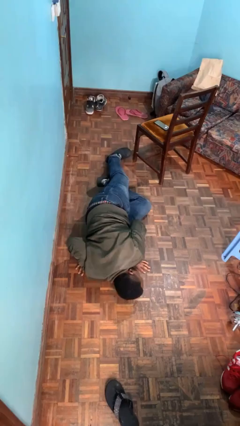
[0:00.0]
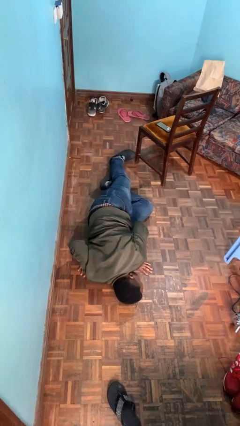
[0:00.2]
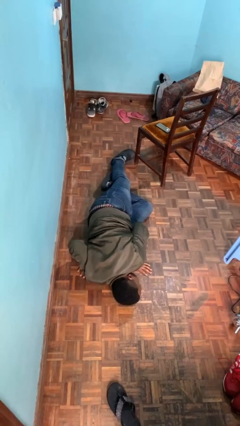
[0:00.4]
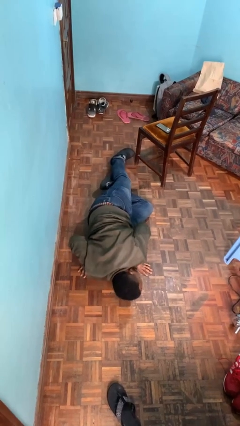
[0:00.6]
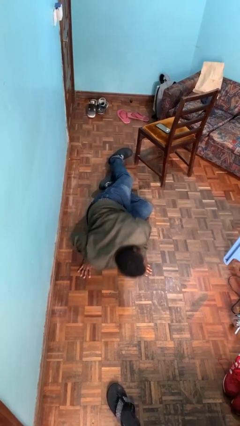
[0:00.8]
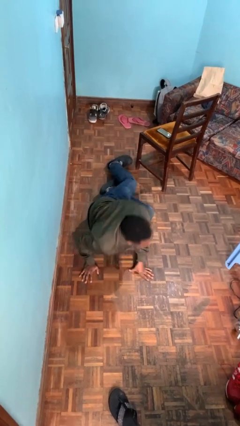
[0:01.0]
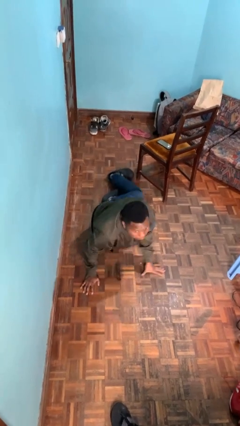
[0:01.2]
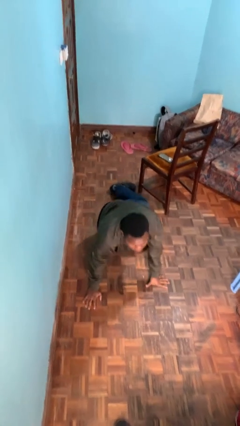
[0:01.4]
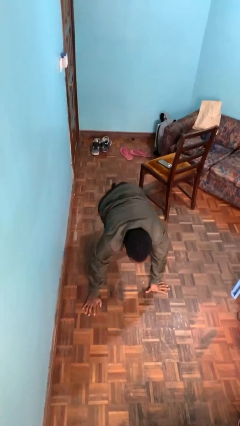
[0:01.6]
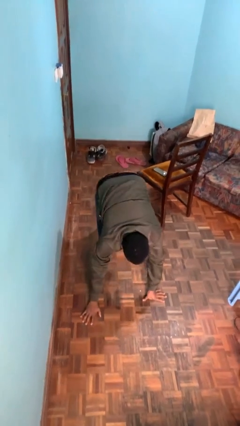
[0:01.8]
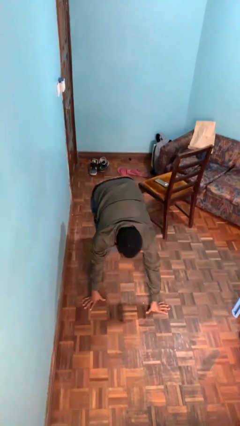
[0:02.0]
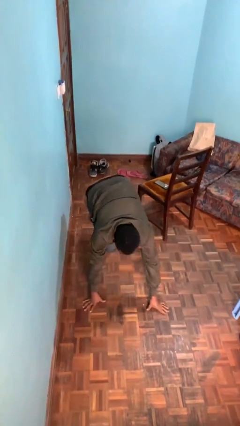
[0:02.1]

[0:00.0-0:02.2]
person stands up from floor

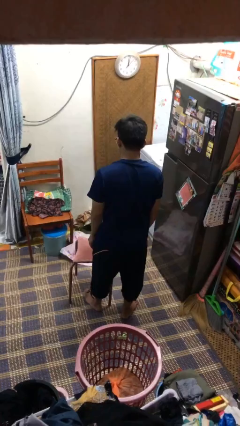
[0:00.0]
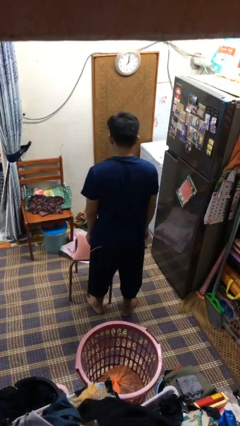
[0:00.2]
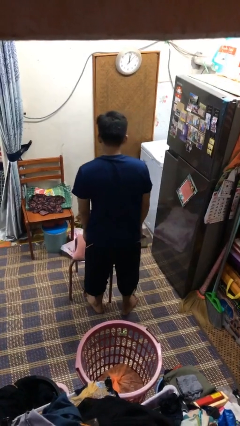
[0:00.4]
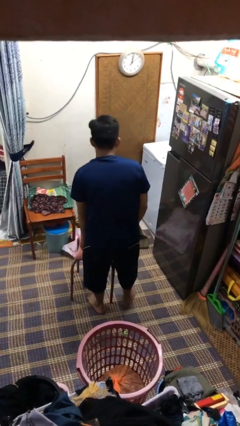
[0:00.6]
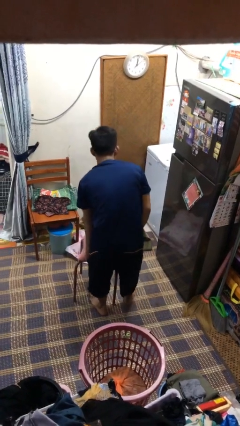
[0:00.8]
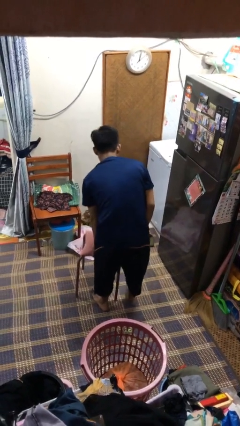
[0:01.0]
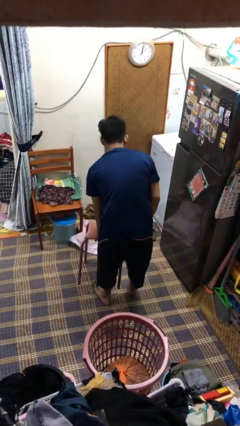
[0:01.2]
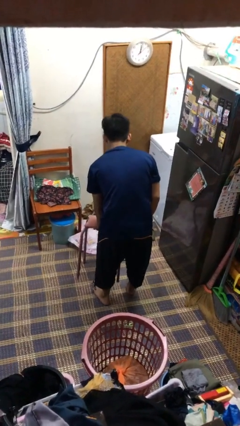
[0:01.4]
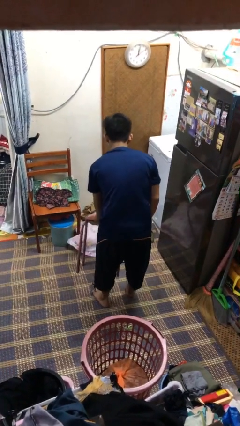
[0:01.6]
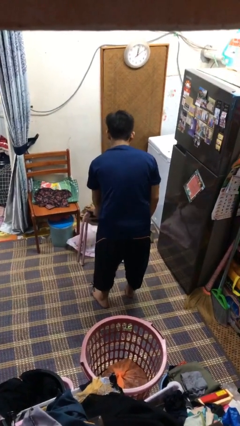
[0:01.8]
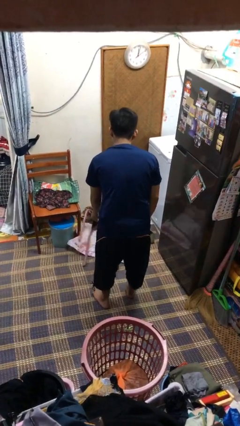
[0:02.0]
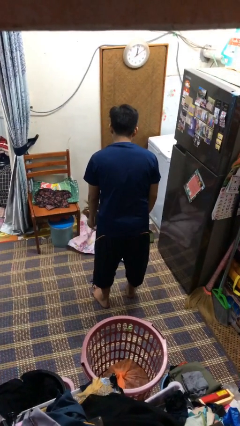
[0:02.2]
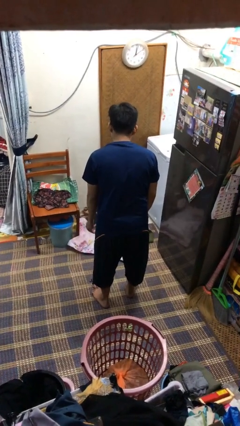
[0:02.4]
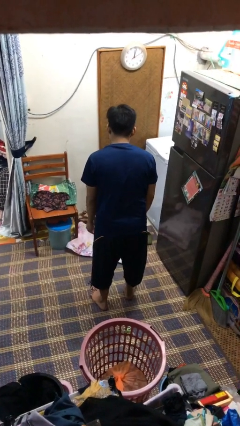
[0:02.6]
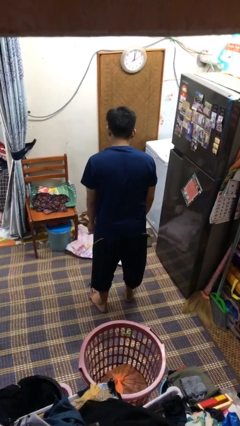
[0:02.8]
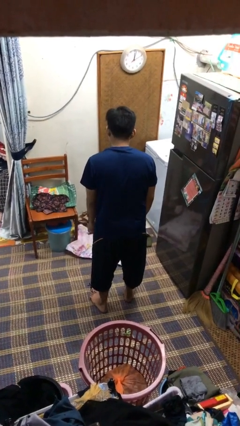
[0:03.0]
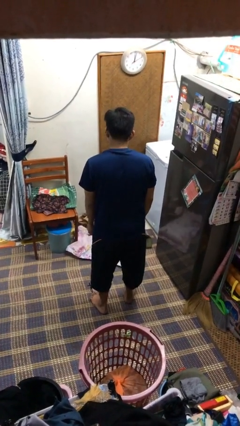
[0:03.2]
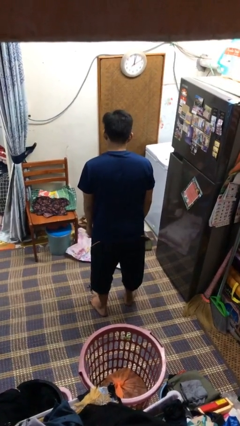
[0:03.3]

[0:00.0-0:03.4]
person knocks over furniture

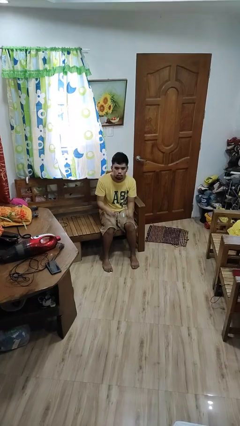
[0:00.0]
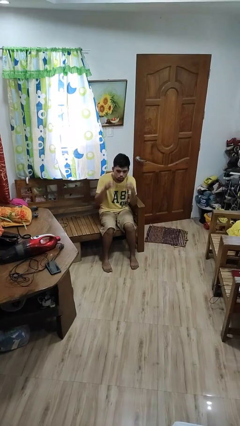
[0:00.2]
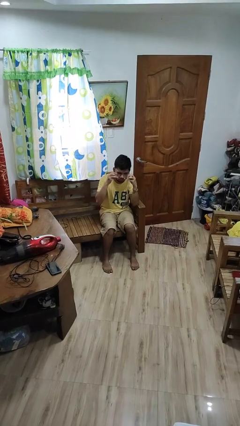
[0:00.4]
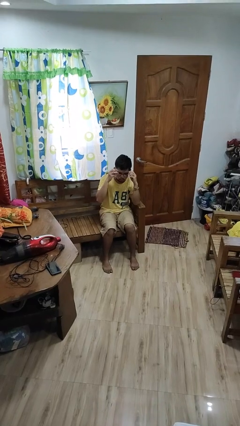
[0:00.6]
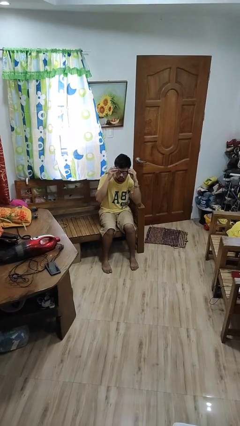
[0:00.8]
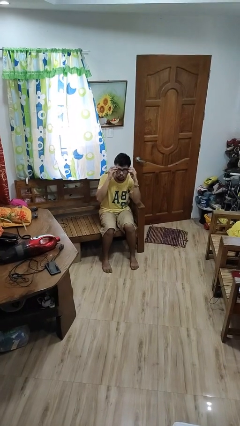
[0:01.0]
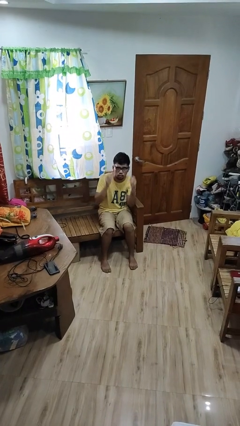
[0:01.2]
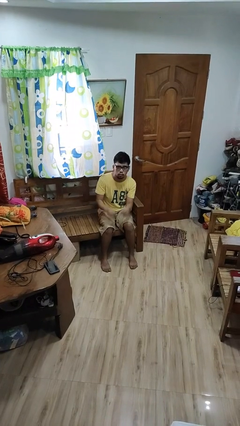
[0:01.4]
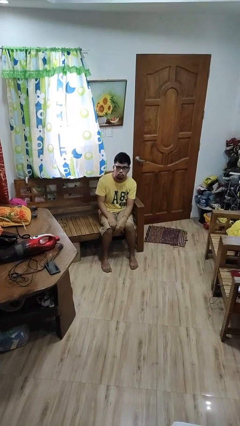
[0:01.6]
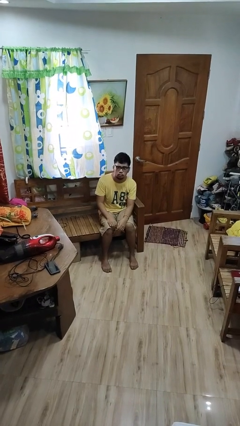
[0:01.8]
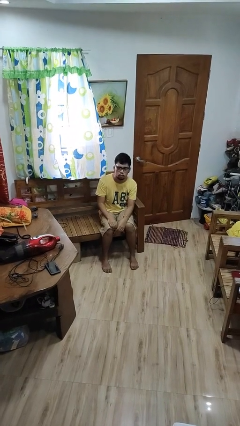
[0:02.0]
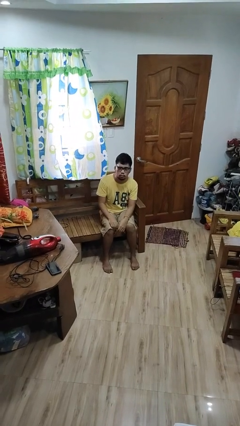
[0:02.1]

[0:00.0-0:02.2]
person puts on glasses

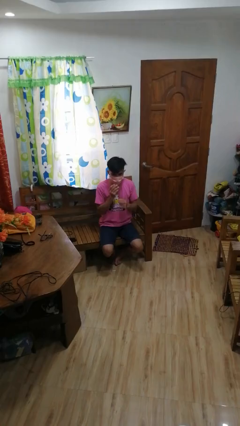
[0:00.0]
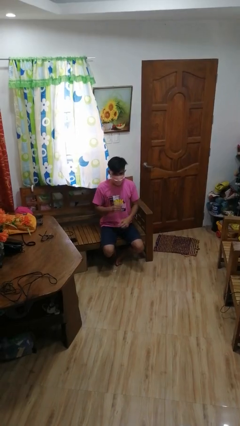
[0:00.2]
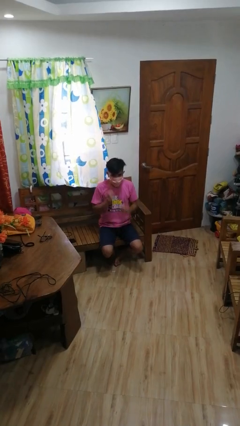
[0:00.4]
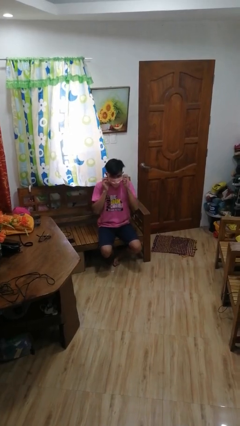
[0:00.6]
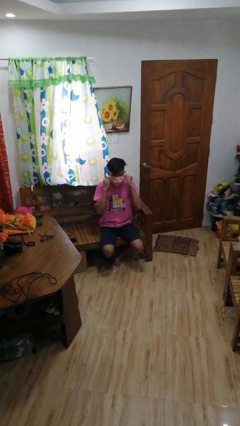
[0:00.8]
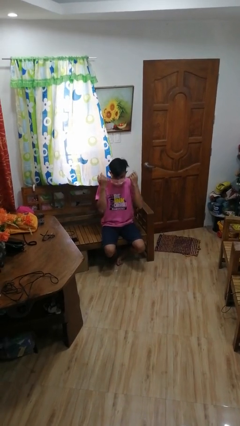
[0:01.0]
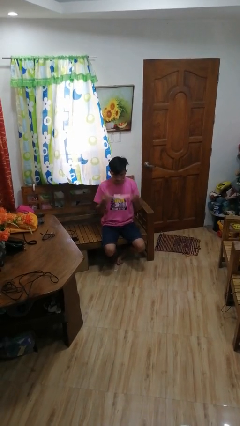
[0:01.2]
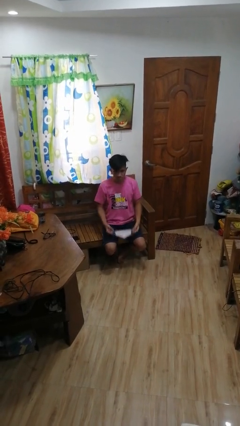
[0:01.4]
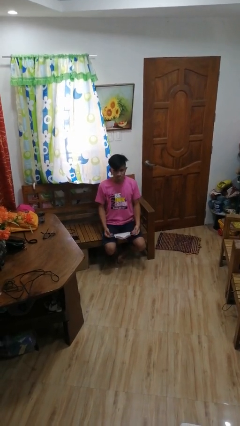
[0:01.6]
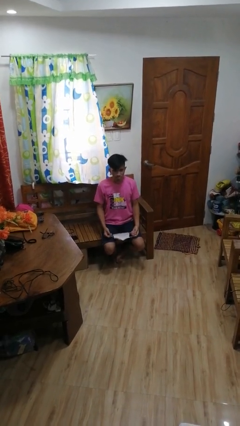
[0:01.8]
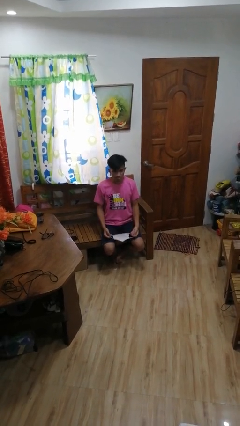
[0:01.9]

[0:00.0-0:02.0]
person takes off facemask

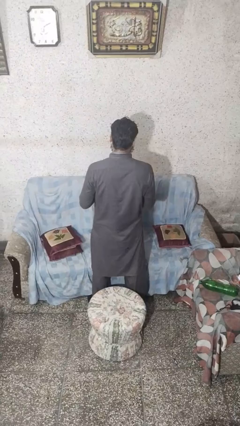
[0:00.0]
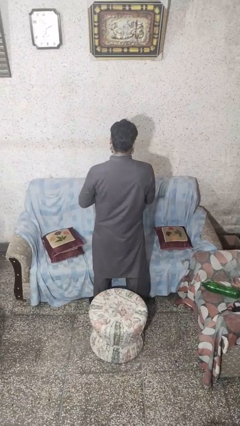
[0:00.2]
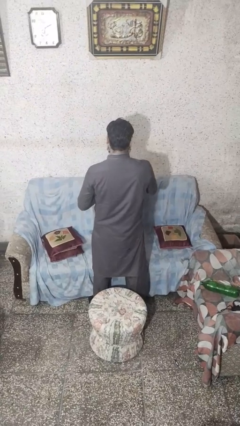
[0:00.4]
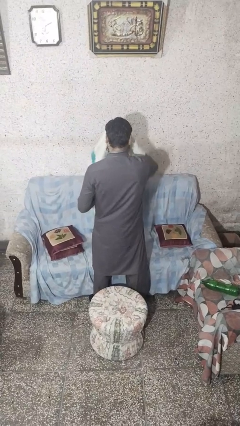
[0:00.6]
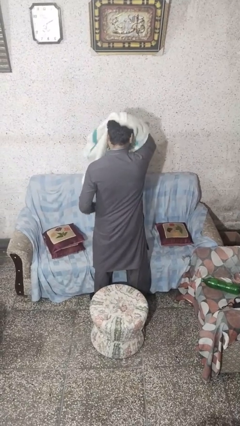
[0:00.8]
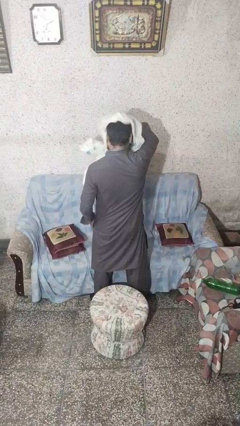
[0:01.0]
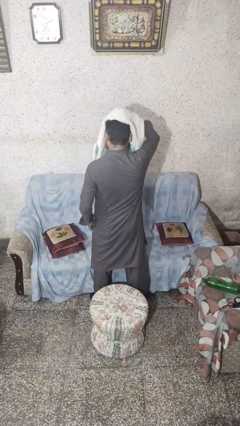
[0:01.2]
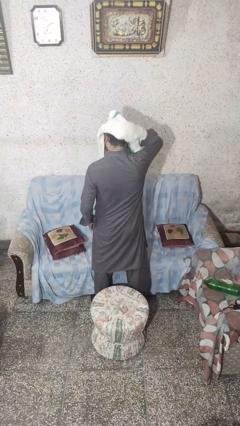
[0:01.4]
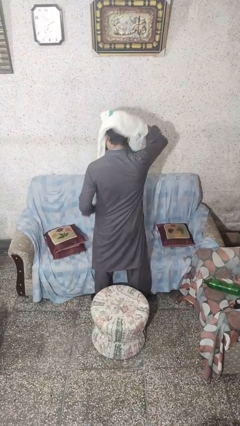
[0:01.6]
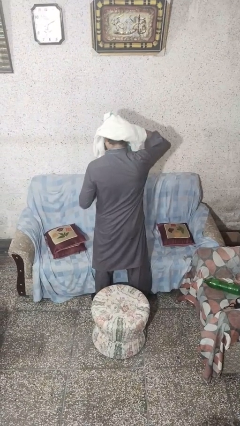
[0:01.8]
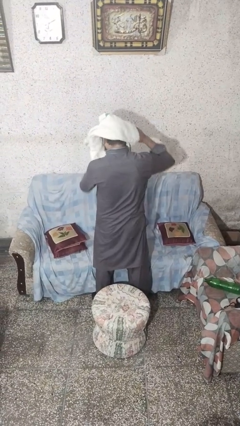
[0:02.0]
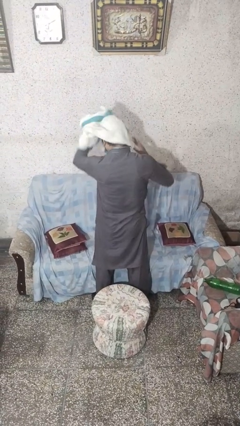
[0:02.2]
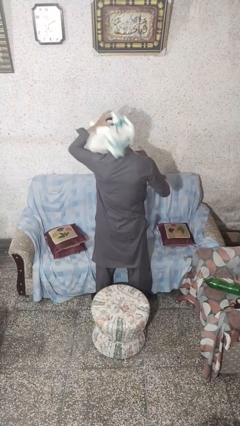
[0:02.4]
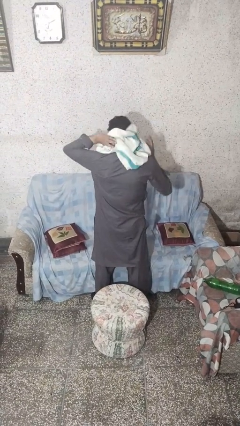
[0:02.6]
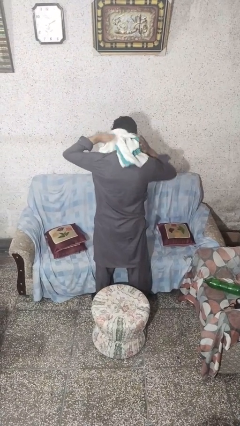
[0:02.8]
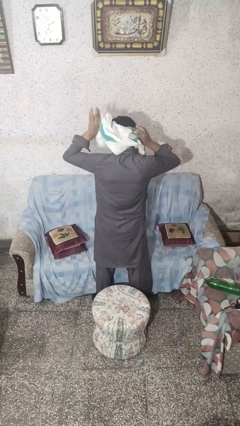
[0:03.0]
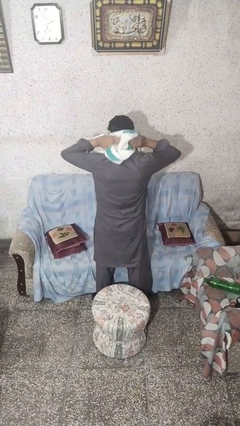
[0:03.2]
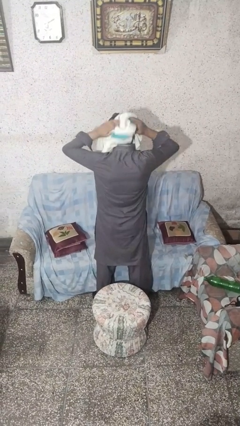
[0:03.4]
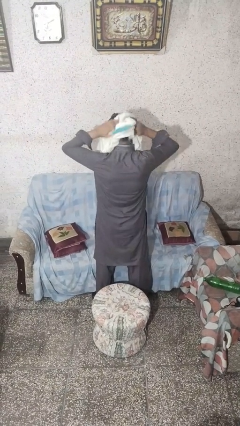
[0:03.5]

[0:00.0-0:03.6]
person dries hair with towel

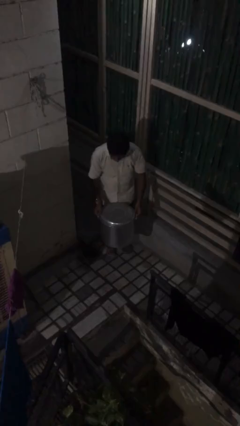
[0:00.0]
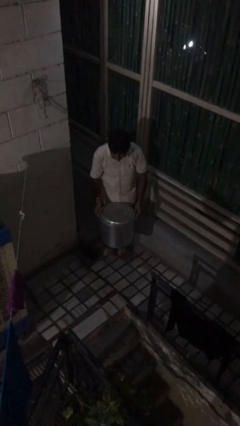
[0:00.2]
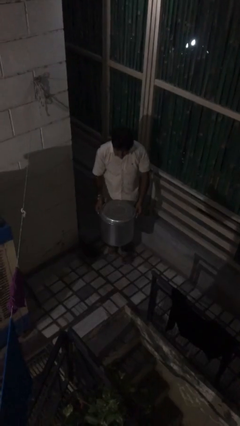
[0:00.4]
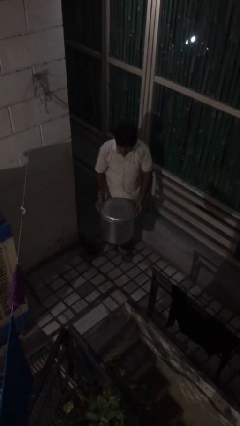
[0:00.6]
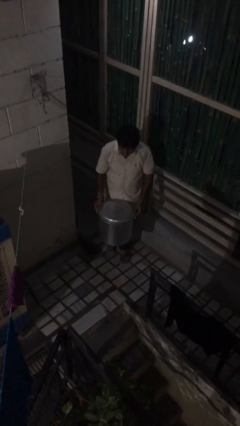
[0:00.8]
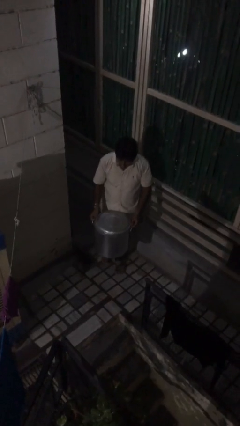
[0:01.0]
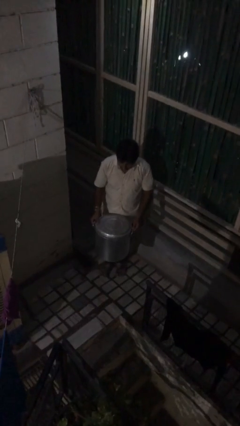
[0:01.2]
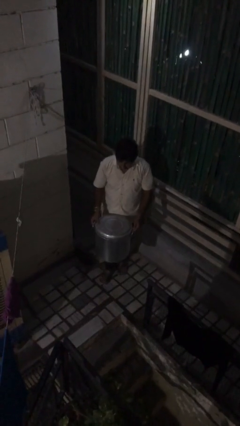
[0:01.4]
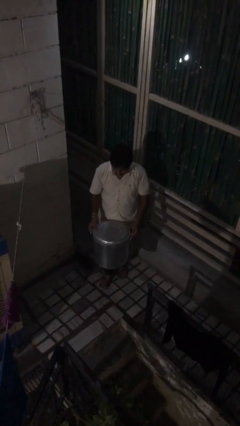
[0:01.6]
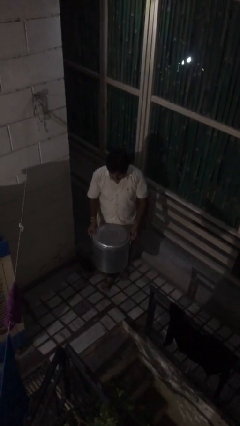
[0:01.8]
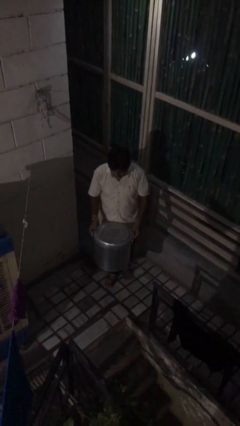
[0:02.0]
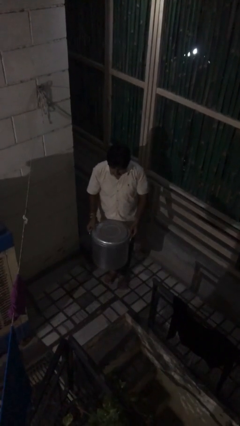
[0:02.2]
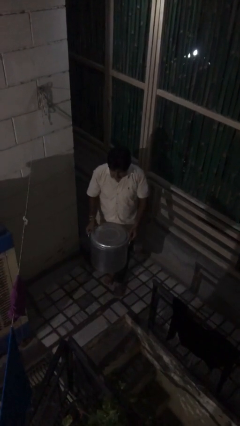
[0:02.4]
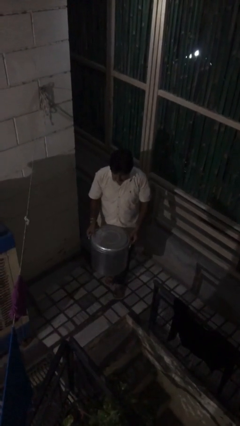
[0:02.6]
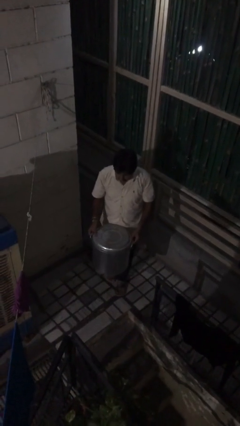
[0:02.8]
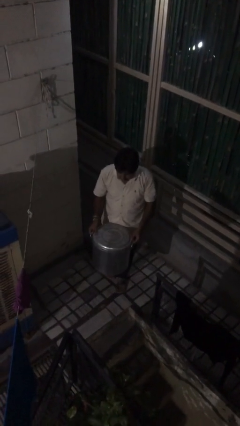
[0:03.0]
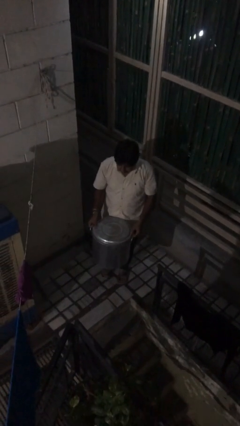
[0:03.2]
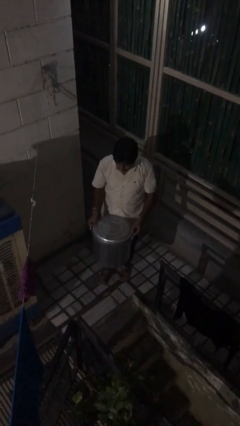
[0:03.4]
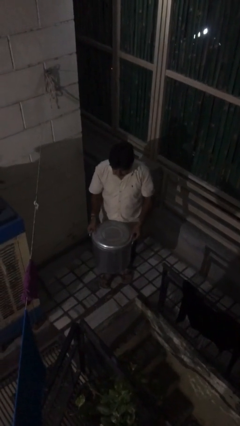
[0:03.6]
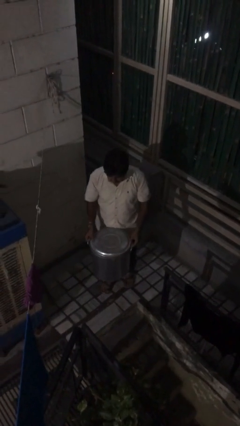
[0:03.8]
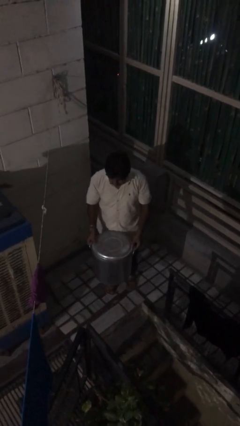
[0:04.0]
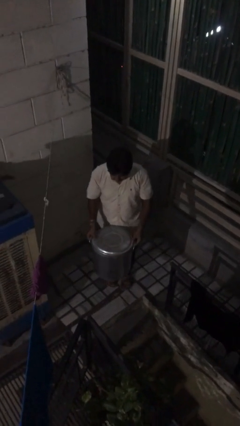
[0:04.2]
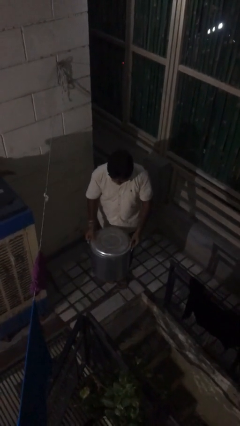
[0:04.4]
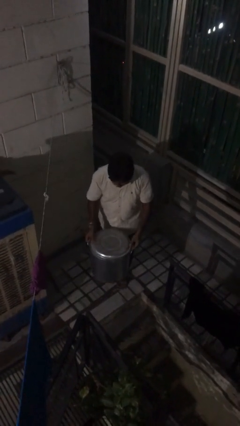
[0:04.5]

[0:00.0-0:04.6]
person carries heavy object
